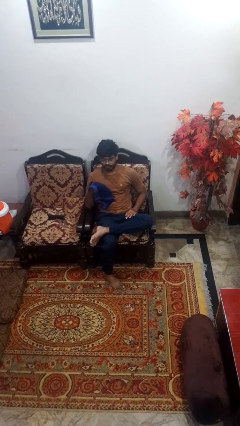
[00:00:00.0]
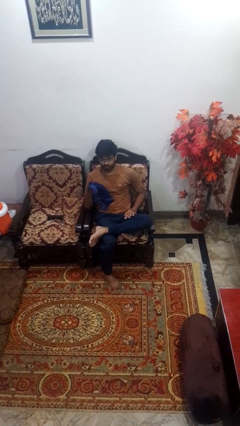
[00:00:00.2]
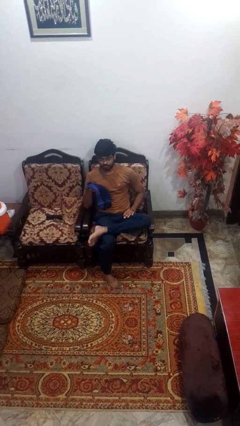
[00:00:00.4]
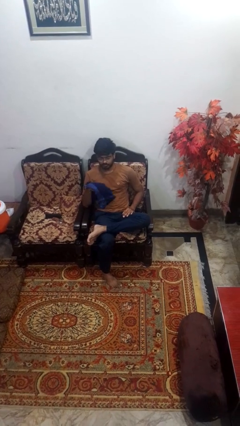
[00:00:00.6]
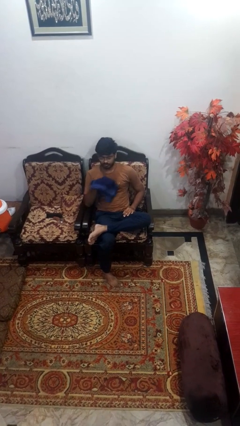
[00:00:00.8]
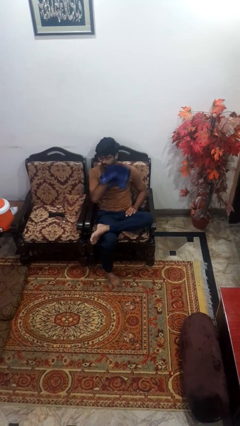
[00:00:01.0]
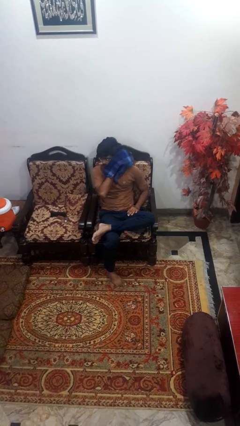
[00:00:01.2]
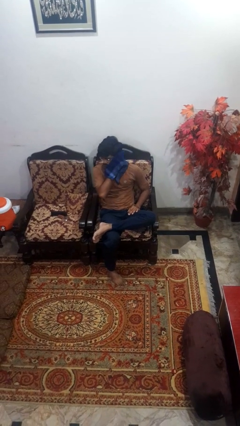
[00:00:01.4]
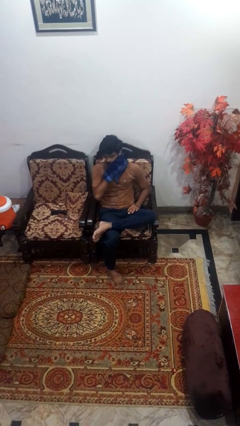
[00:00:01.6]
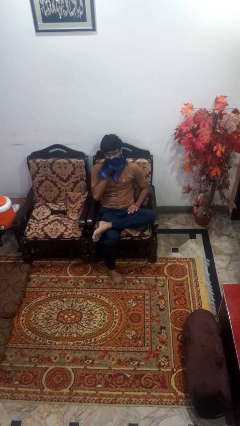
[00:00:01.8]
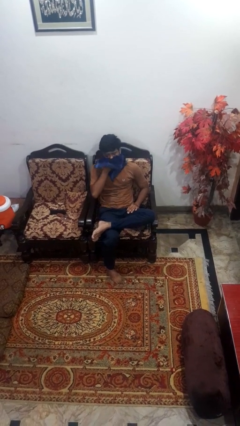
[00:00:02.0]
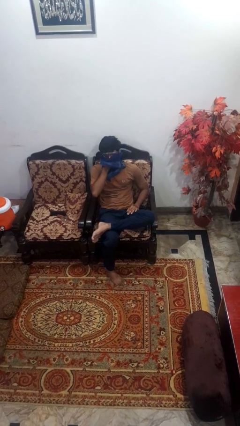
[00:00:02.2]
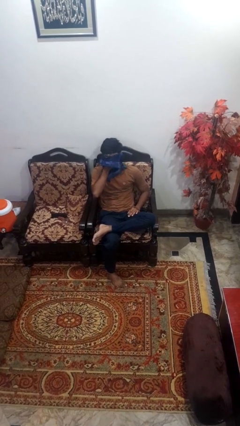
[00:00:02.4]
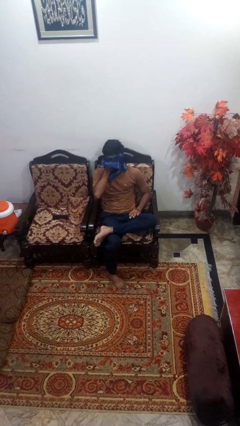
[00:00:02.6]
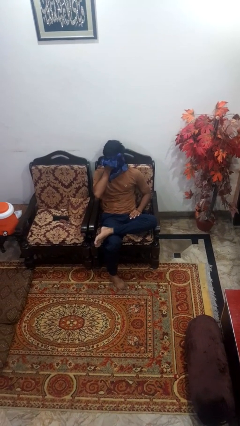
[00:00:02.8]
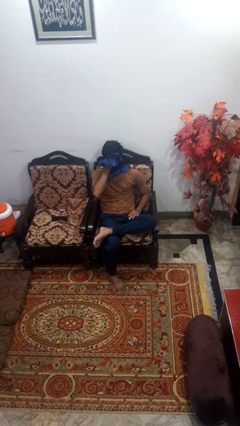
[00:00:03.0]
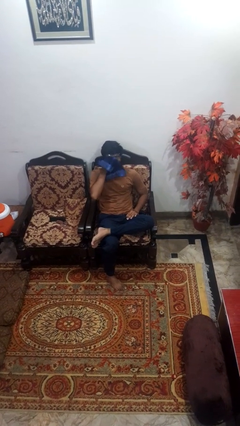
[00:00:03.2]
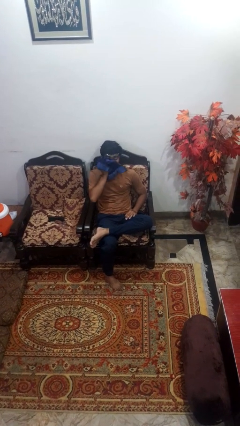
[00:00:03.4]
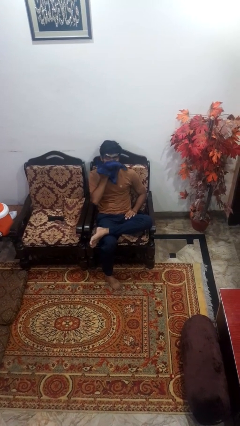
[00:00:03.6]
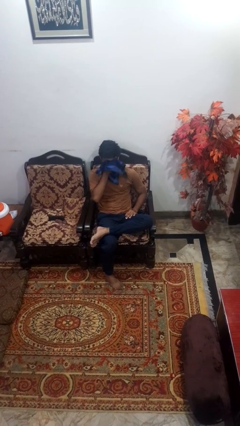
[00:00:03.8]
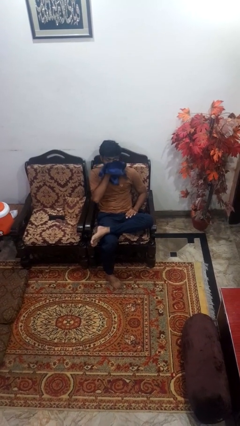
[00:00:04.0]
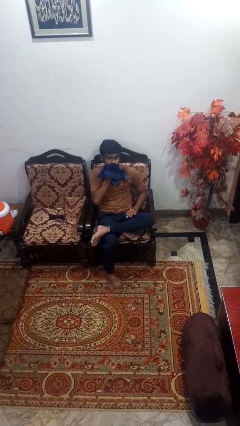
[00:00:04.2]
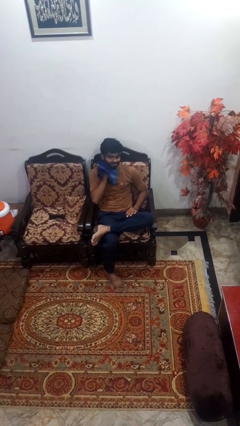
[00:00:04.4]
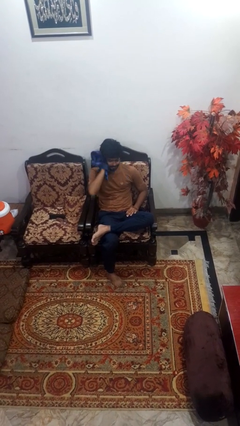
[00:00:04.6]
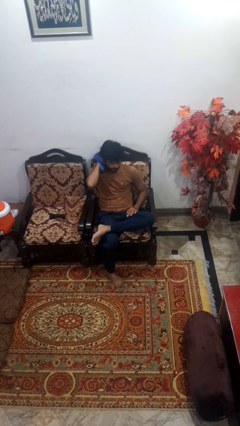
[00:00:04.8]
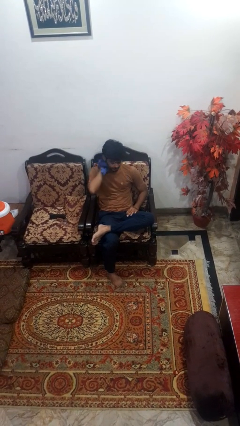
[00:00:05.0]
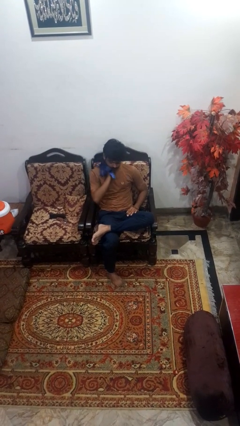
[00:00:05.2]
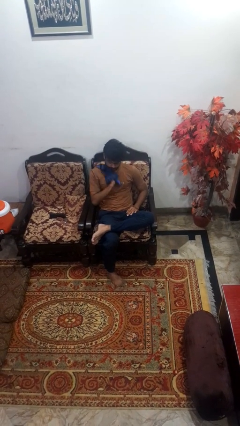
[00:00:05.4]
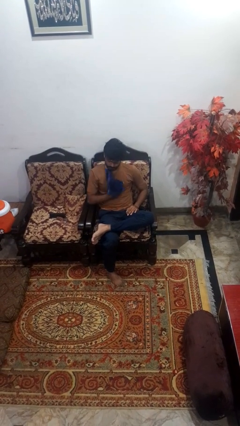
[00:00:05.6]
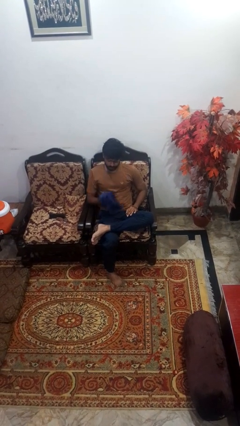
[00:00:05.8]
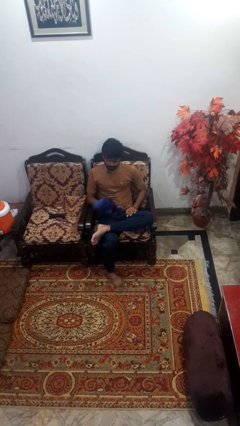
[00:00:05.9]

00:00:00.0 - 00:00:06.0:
person wipes mouth with napkin

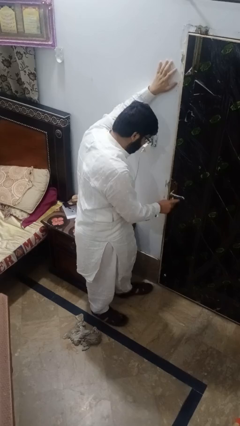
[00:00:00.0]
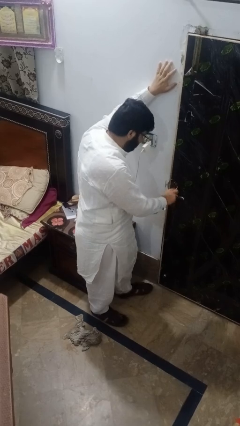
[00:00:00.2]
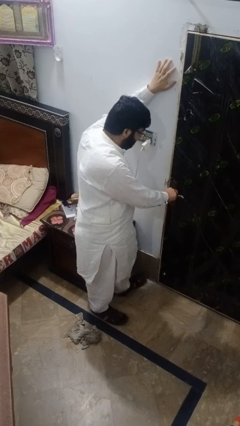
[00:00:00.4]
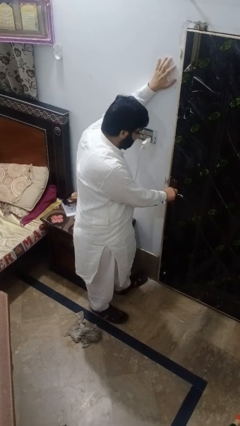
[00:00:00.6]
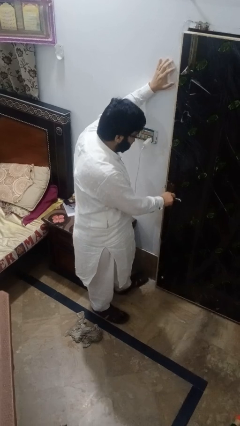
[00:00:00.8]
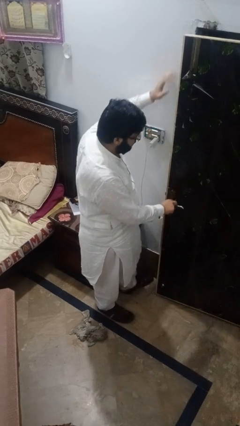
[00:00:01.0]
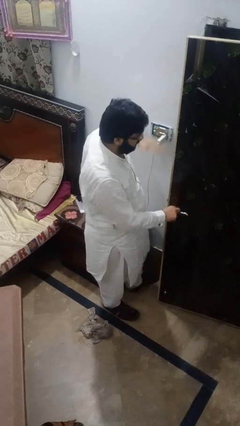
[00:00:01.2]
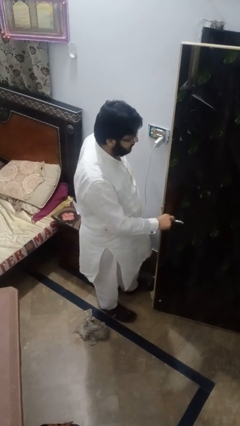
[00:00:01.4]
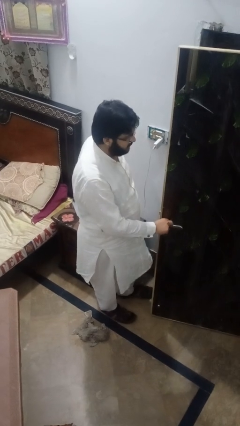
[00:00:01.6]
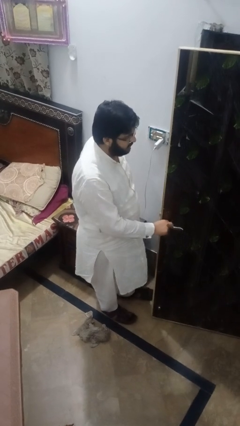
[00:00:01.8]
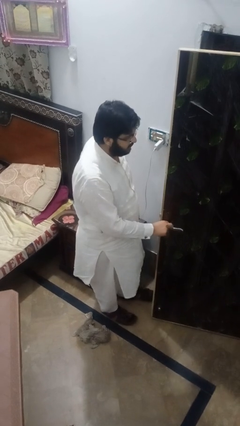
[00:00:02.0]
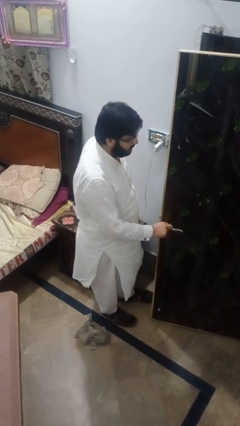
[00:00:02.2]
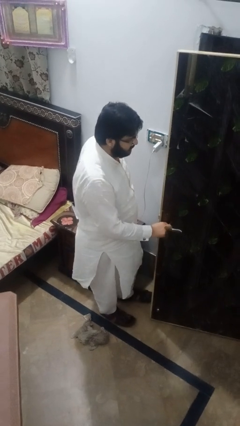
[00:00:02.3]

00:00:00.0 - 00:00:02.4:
person opens facility door

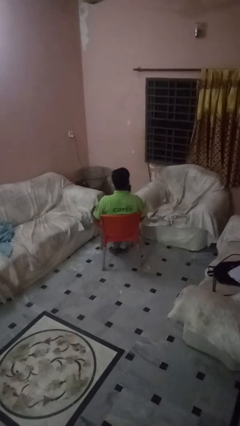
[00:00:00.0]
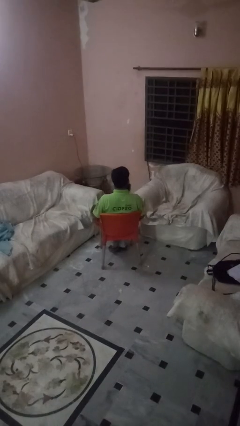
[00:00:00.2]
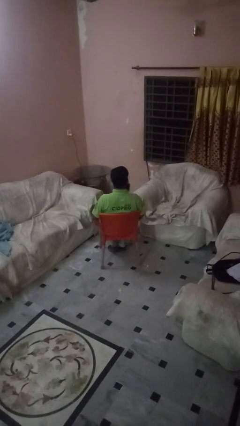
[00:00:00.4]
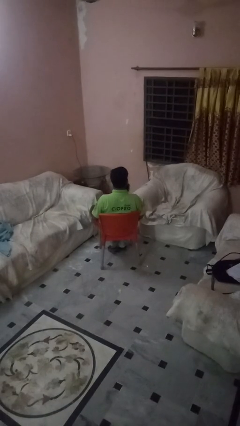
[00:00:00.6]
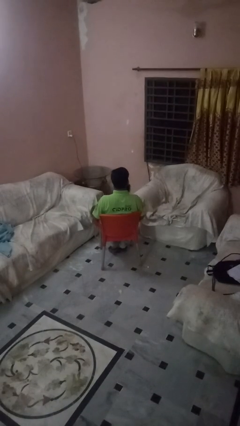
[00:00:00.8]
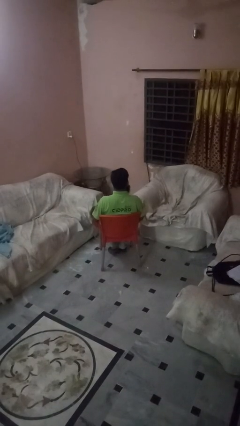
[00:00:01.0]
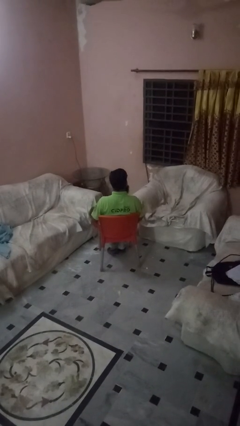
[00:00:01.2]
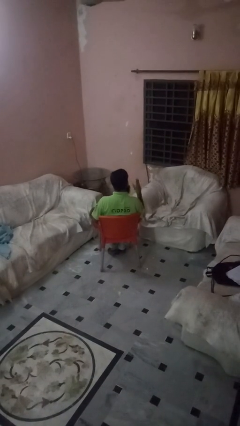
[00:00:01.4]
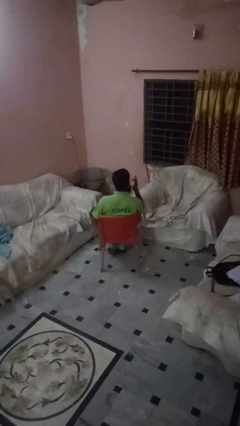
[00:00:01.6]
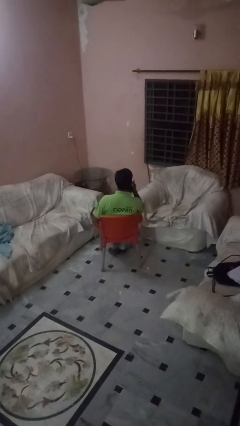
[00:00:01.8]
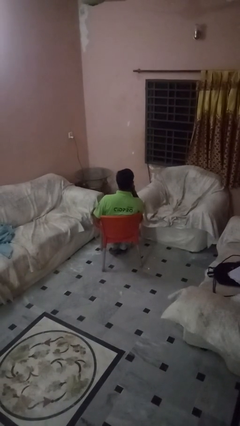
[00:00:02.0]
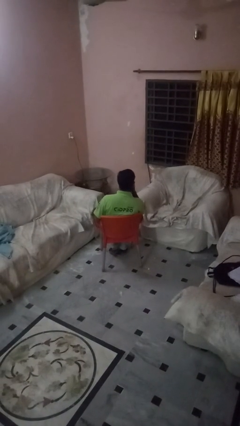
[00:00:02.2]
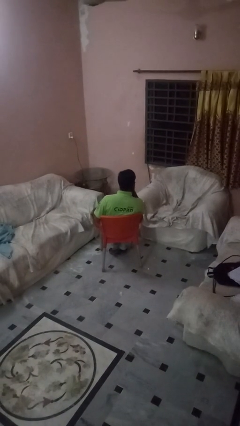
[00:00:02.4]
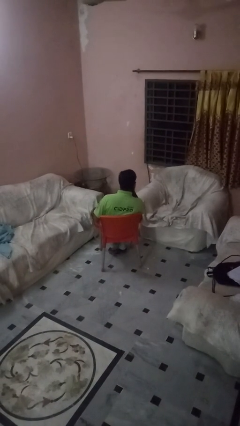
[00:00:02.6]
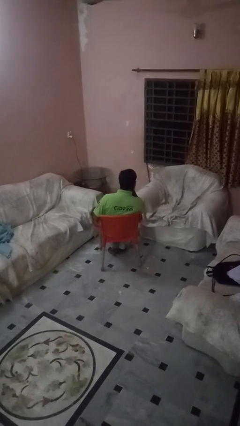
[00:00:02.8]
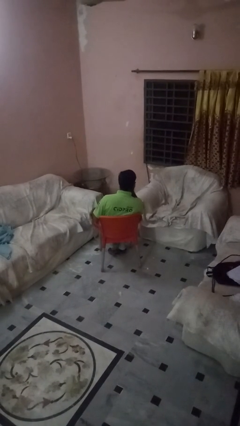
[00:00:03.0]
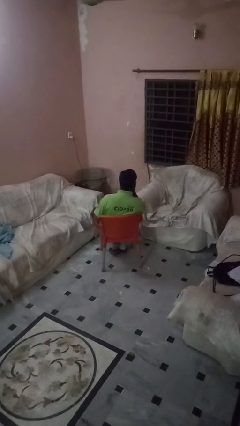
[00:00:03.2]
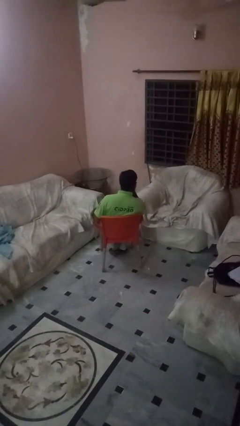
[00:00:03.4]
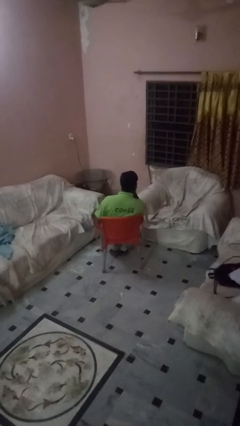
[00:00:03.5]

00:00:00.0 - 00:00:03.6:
person strokes chin

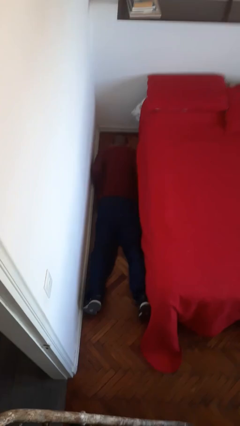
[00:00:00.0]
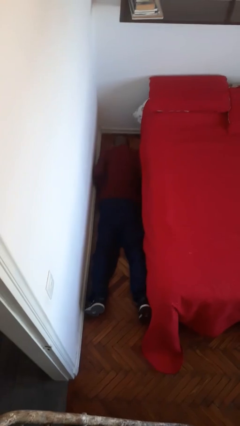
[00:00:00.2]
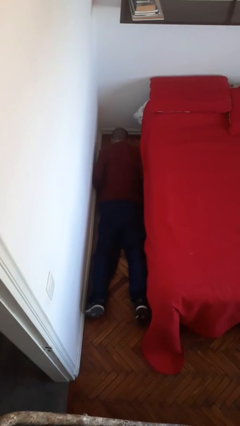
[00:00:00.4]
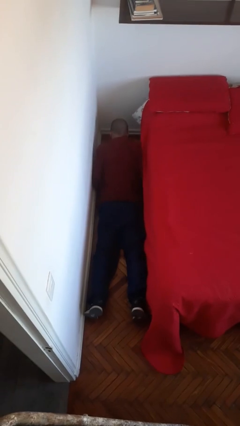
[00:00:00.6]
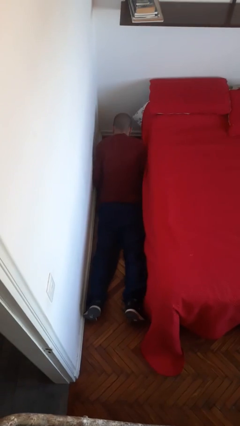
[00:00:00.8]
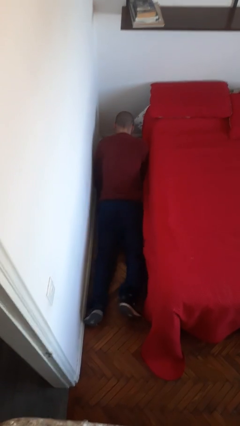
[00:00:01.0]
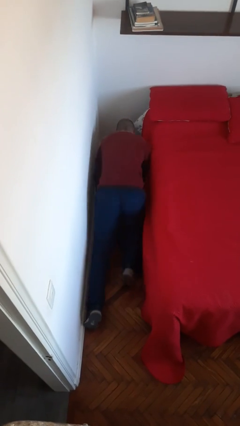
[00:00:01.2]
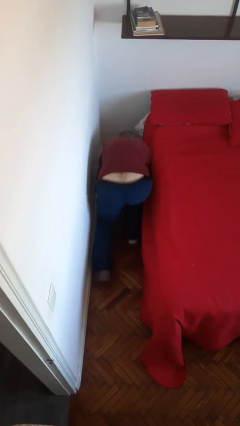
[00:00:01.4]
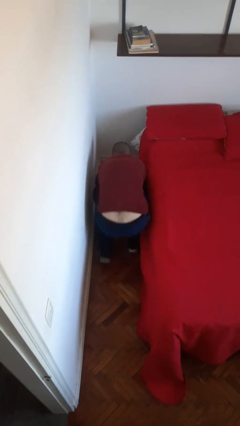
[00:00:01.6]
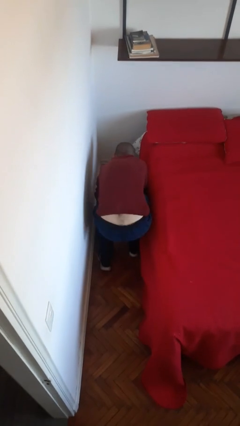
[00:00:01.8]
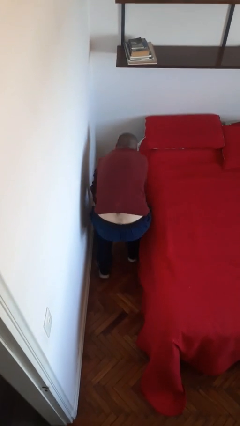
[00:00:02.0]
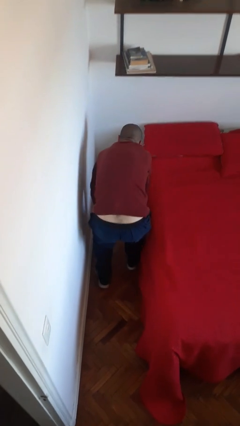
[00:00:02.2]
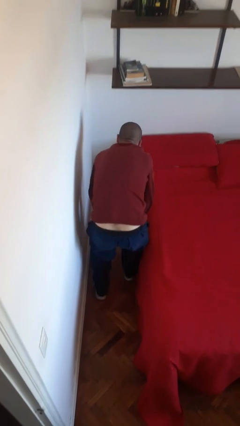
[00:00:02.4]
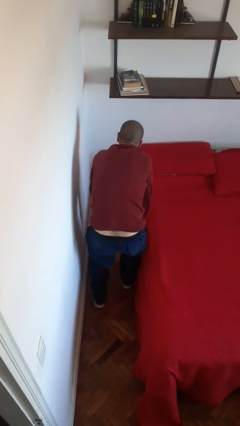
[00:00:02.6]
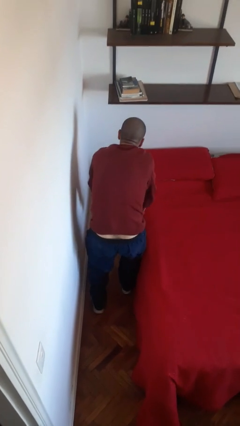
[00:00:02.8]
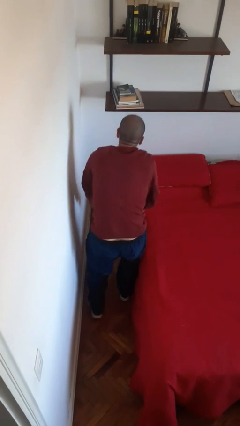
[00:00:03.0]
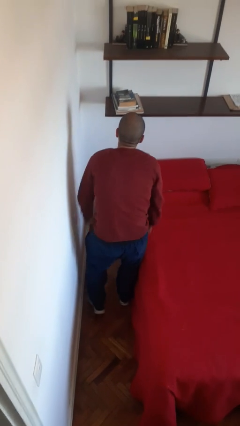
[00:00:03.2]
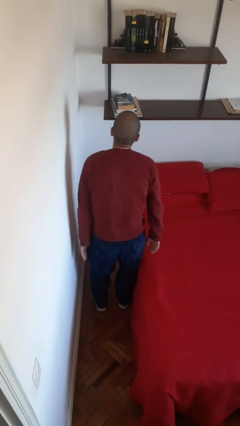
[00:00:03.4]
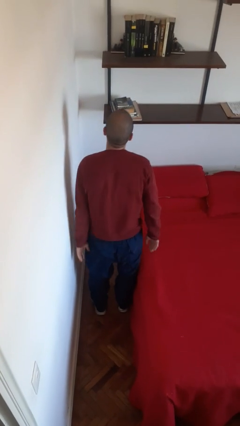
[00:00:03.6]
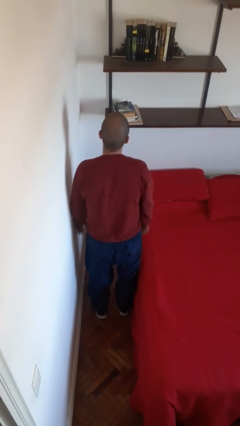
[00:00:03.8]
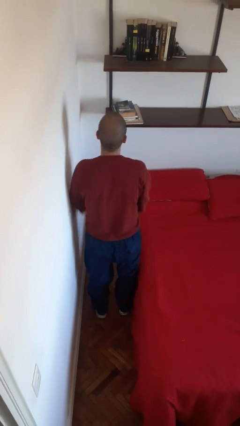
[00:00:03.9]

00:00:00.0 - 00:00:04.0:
person stands up from floor

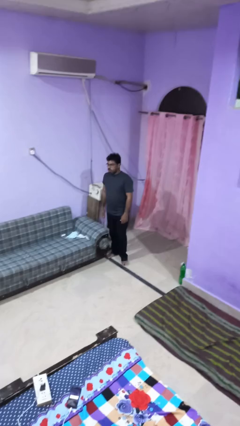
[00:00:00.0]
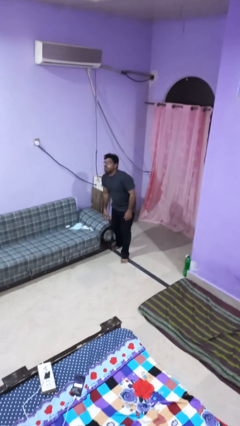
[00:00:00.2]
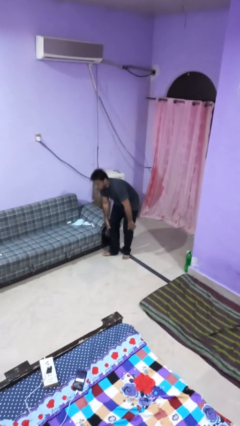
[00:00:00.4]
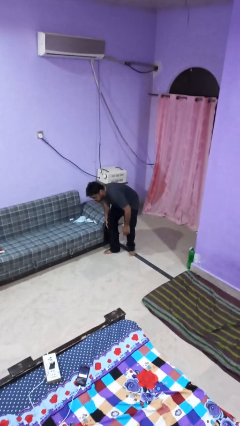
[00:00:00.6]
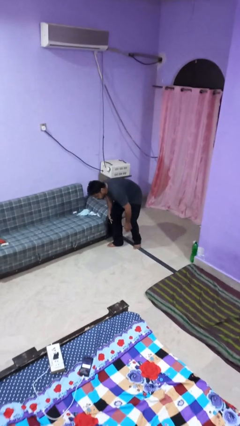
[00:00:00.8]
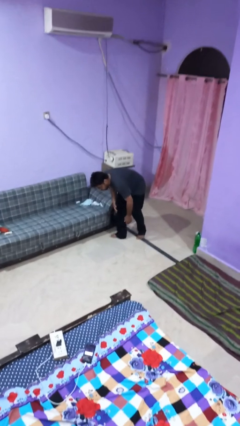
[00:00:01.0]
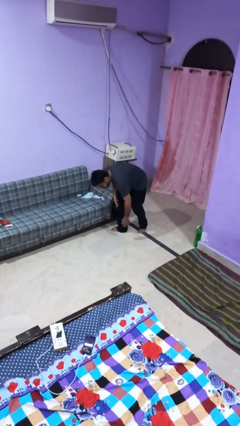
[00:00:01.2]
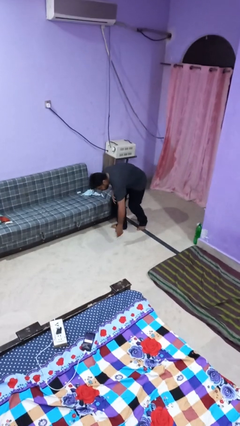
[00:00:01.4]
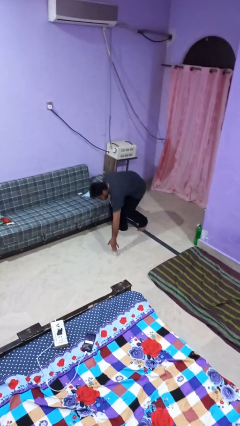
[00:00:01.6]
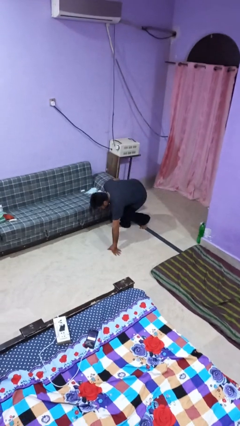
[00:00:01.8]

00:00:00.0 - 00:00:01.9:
person trips on object on floor
